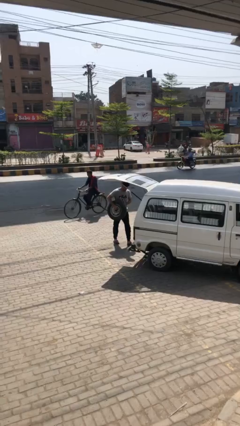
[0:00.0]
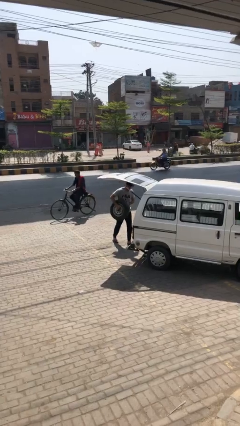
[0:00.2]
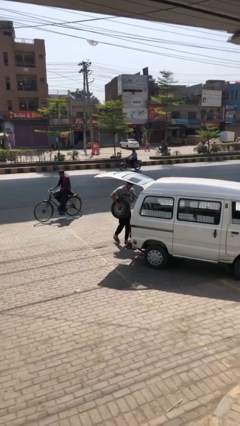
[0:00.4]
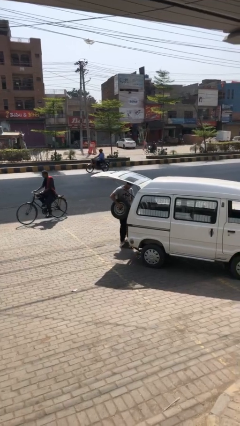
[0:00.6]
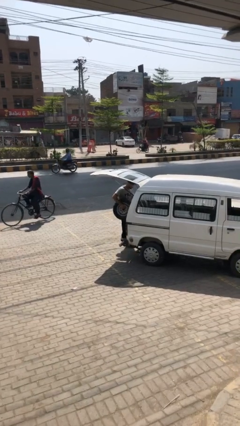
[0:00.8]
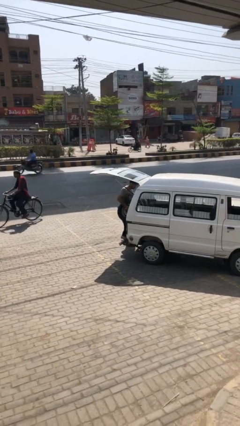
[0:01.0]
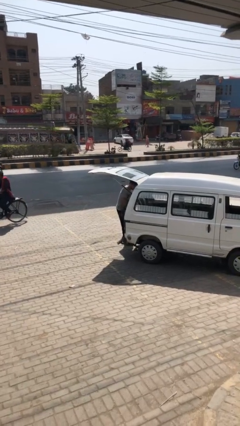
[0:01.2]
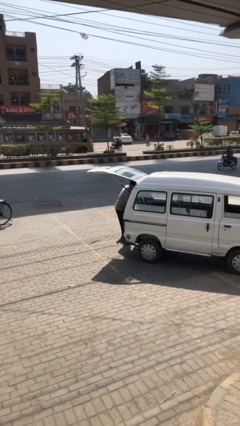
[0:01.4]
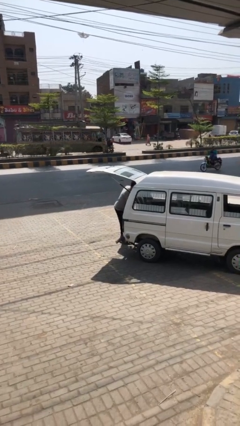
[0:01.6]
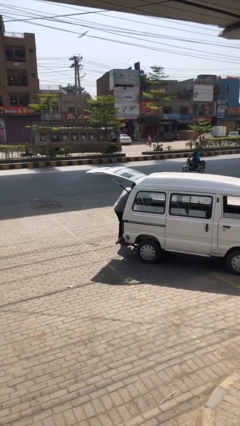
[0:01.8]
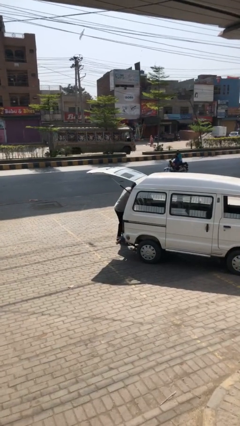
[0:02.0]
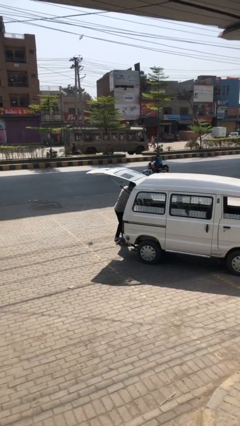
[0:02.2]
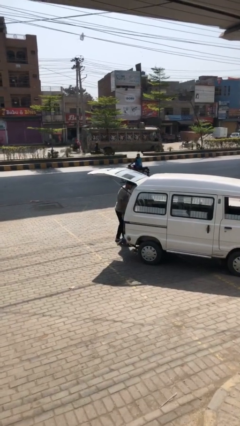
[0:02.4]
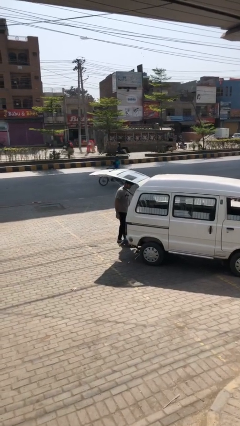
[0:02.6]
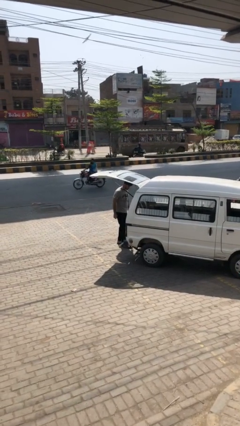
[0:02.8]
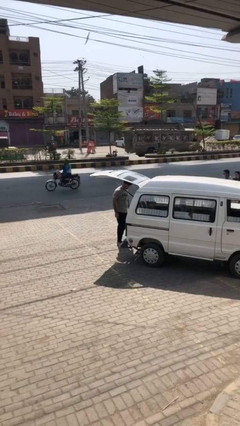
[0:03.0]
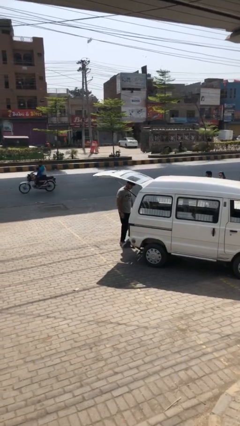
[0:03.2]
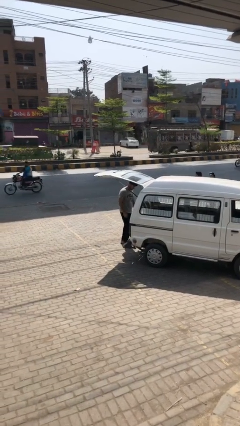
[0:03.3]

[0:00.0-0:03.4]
person loads car

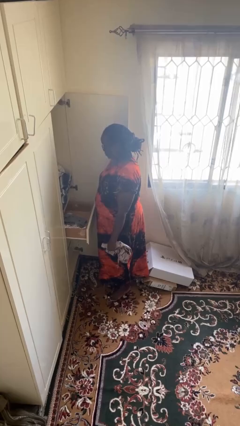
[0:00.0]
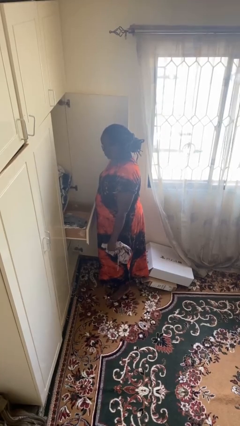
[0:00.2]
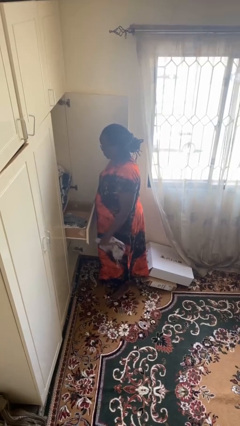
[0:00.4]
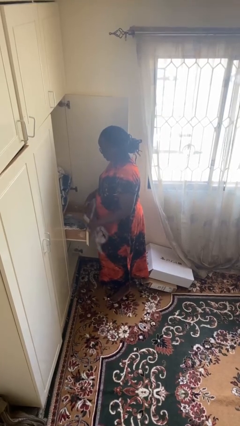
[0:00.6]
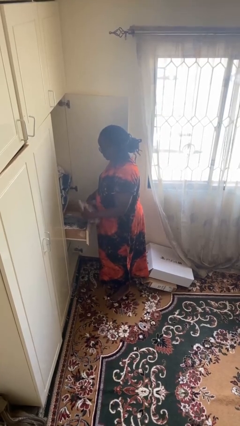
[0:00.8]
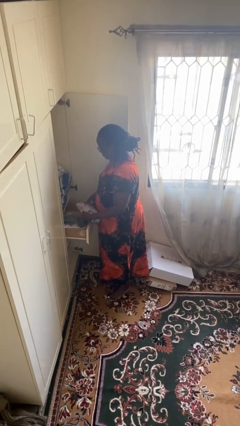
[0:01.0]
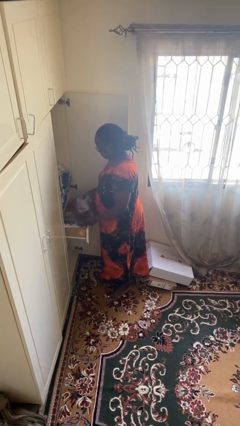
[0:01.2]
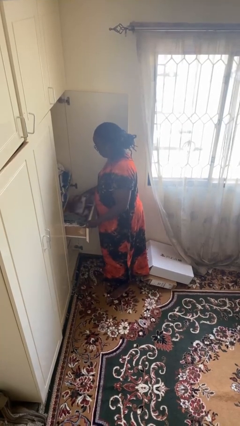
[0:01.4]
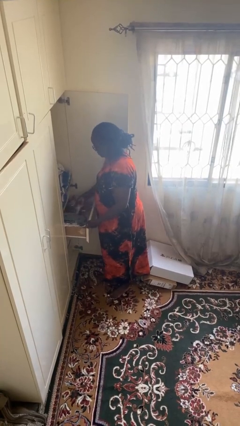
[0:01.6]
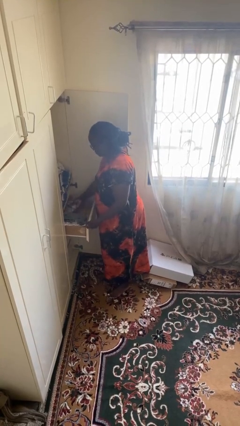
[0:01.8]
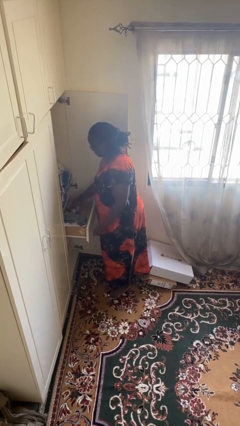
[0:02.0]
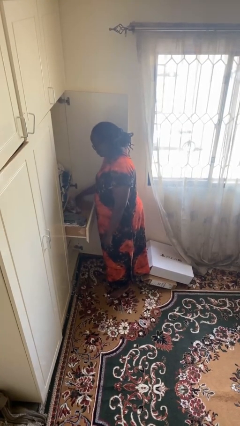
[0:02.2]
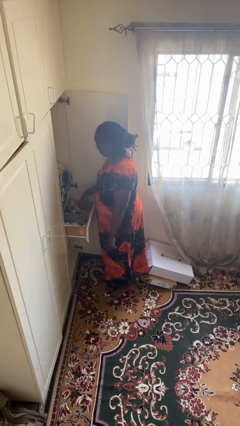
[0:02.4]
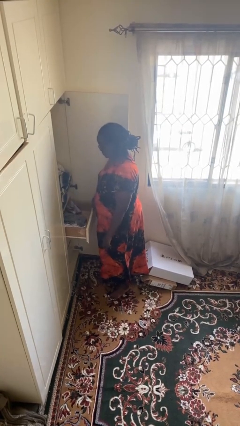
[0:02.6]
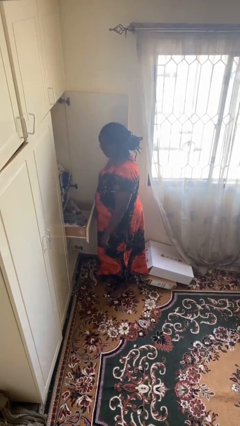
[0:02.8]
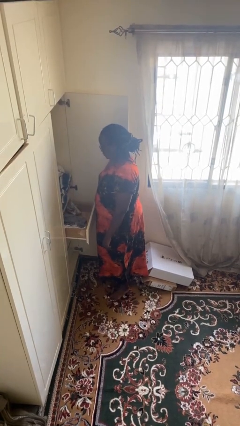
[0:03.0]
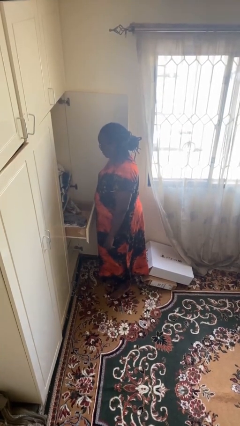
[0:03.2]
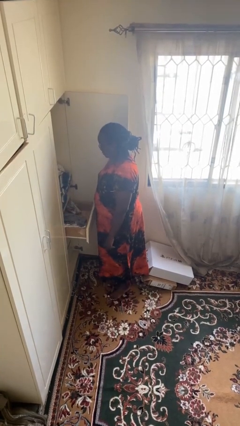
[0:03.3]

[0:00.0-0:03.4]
person puts clothes into dresser

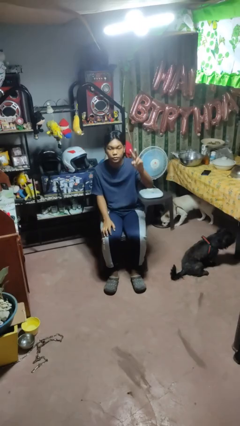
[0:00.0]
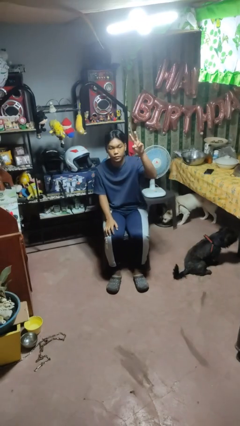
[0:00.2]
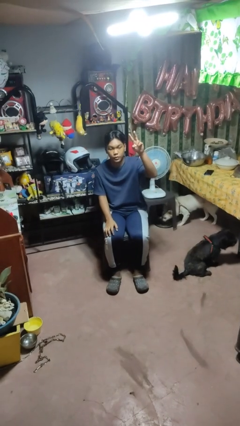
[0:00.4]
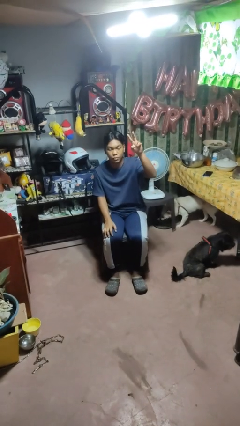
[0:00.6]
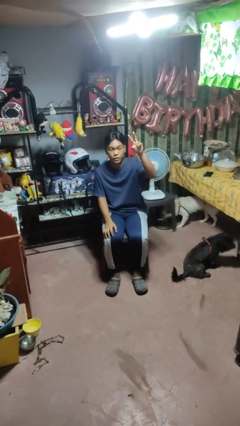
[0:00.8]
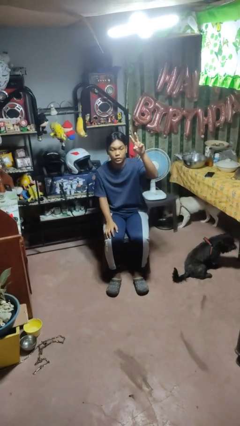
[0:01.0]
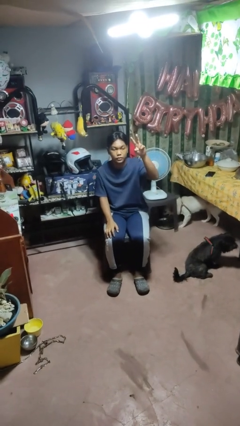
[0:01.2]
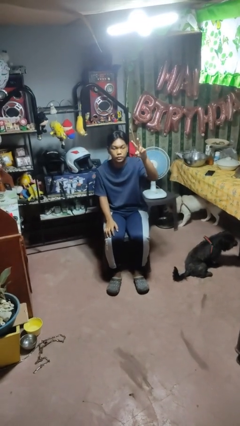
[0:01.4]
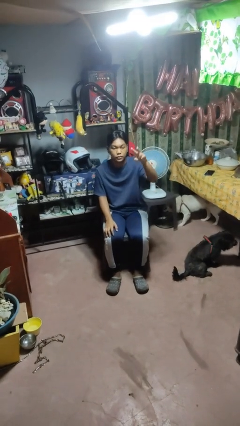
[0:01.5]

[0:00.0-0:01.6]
person gestures peace

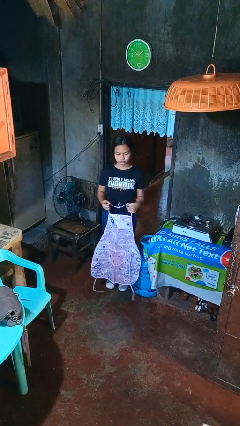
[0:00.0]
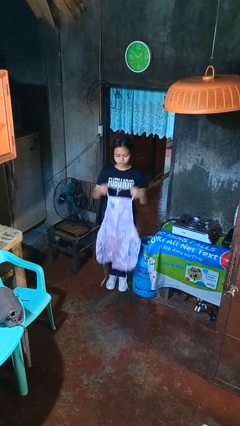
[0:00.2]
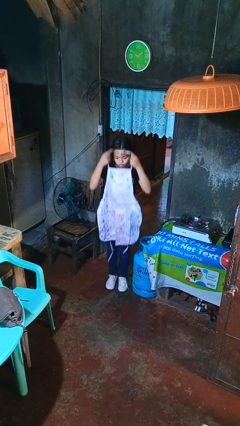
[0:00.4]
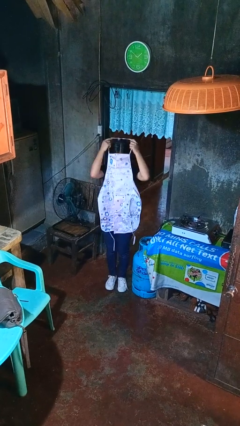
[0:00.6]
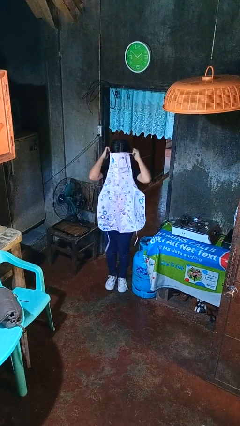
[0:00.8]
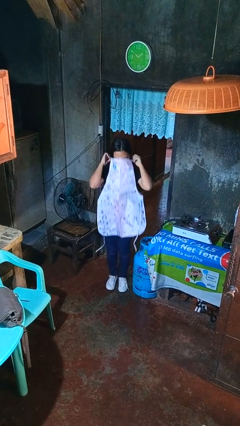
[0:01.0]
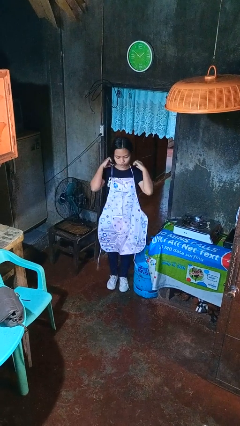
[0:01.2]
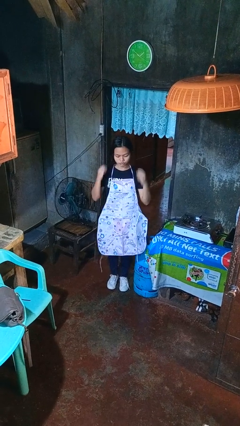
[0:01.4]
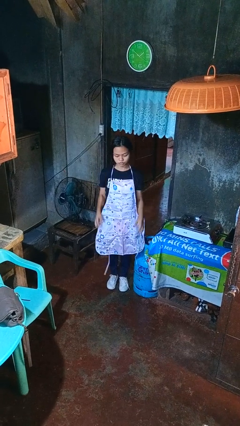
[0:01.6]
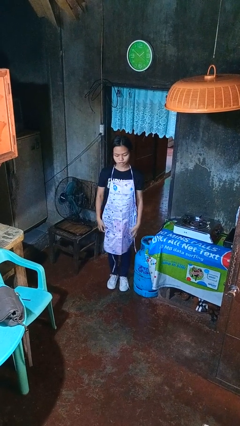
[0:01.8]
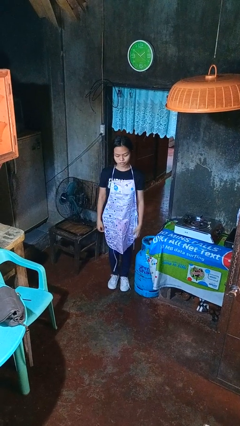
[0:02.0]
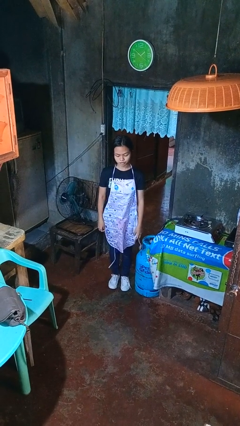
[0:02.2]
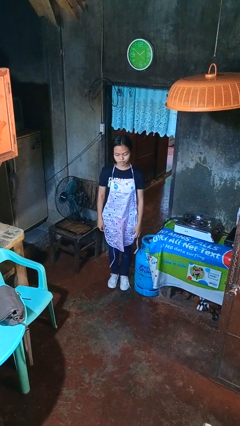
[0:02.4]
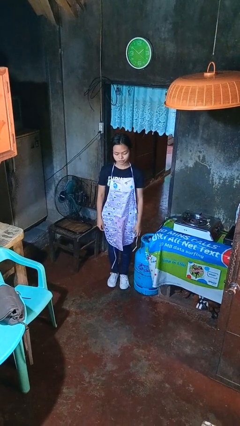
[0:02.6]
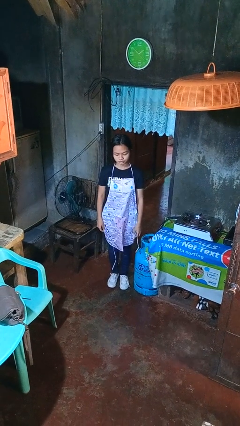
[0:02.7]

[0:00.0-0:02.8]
person puts on apron

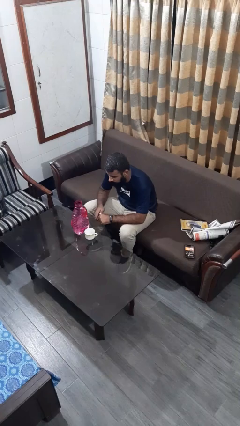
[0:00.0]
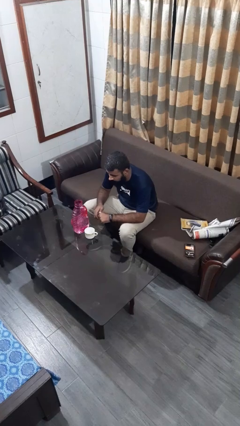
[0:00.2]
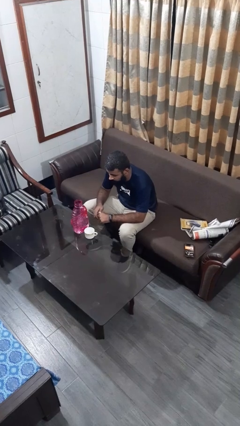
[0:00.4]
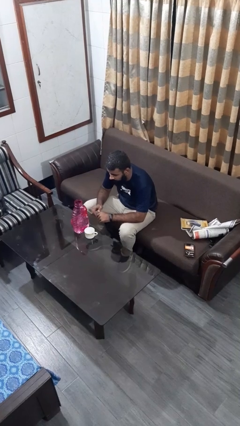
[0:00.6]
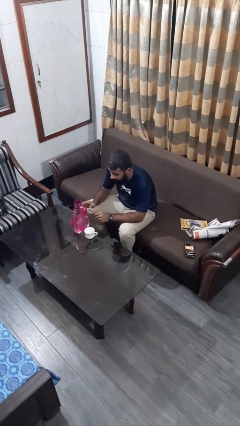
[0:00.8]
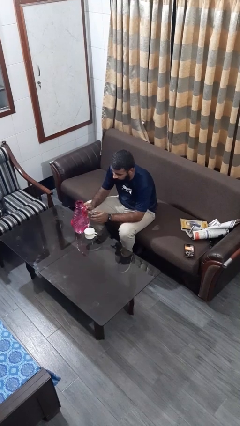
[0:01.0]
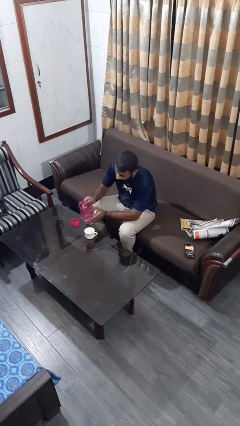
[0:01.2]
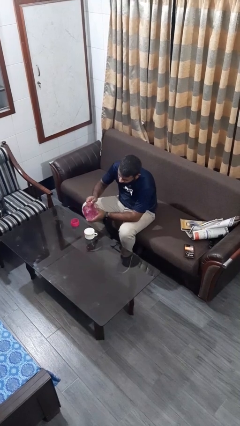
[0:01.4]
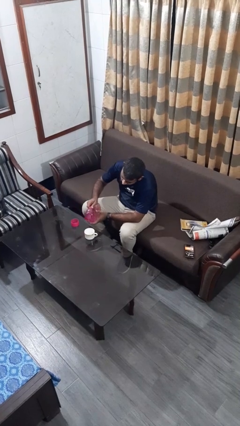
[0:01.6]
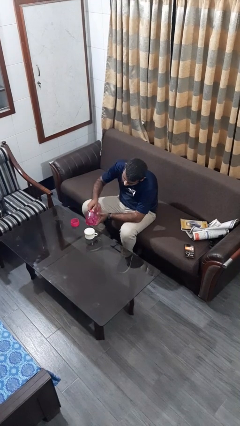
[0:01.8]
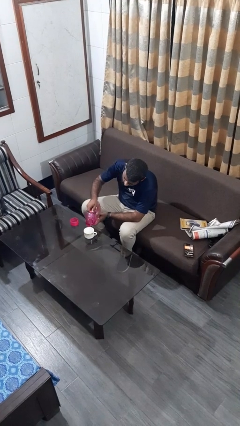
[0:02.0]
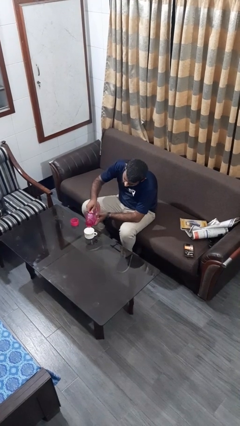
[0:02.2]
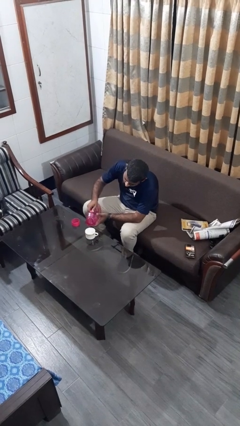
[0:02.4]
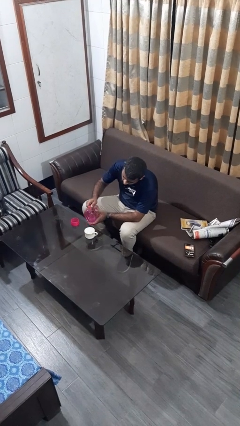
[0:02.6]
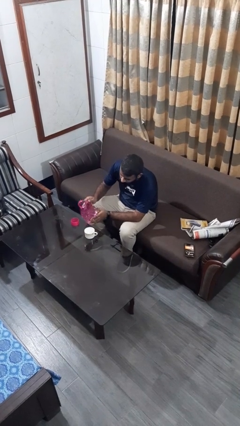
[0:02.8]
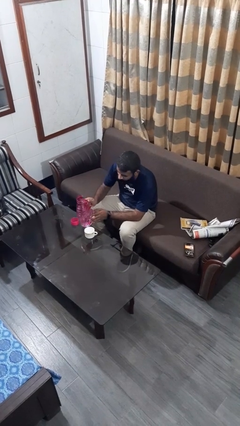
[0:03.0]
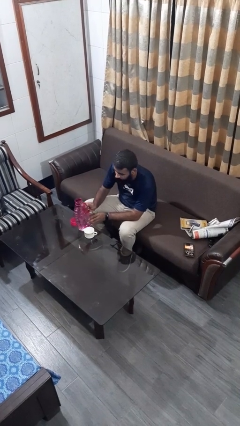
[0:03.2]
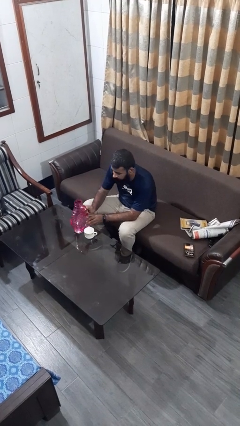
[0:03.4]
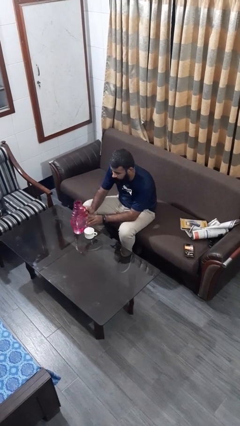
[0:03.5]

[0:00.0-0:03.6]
person pours liquid into cup

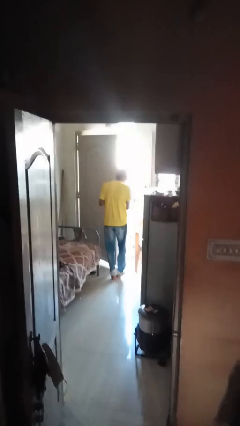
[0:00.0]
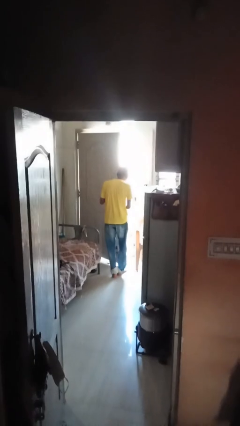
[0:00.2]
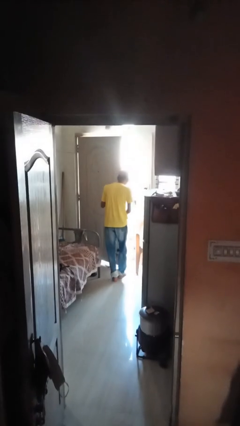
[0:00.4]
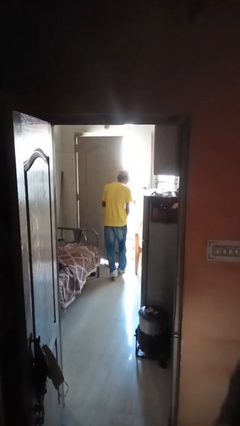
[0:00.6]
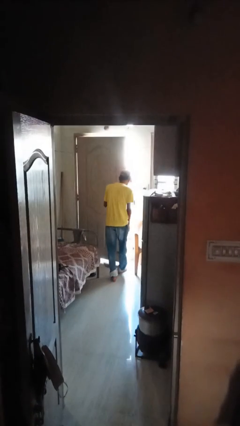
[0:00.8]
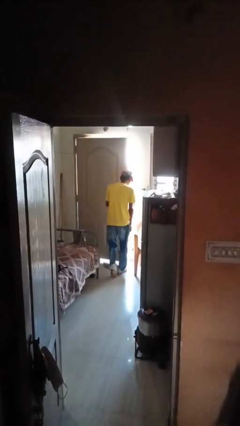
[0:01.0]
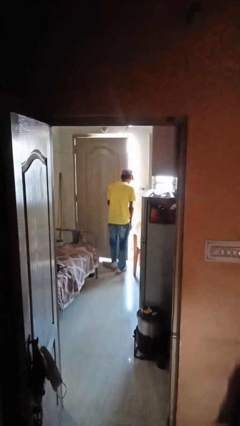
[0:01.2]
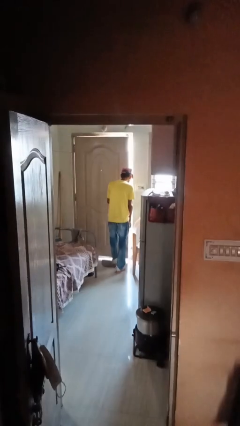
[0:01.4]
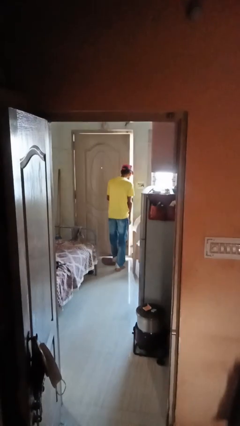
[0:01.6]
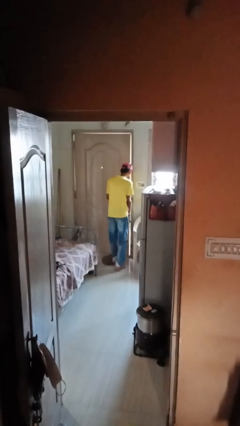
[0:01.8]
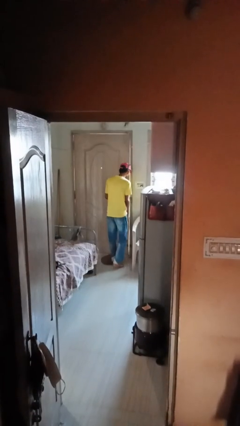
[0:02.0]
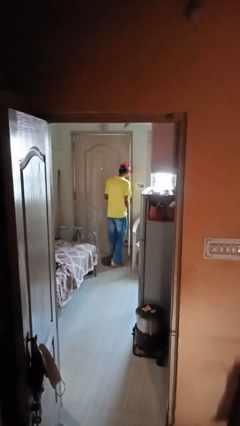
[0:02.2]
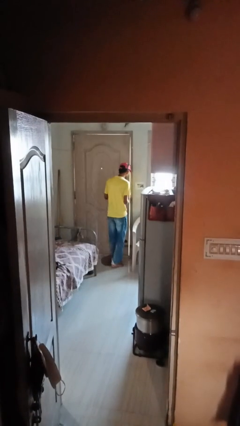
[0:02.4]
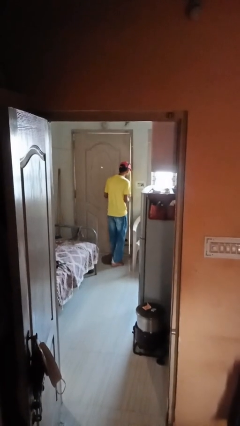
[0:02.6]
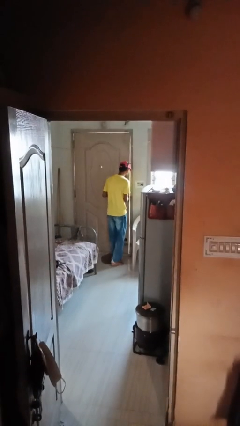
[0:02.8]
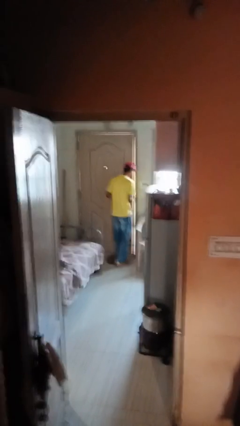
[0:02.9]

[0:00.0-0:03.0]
person closes facility door
